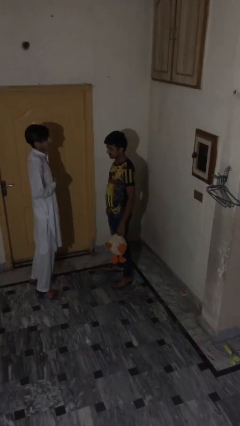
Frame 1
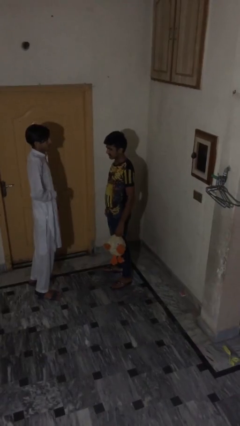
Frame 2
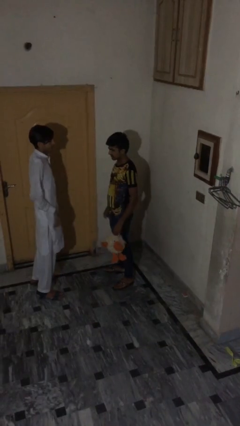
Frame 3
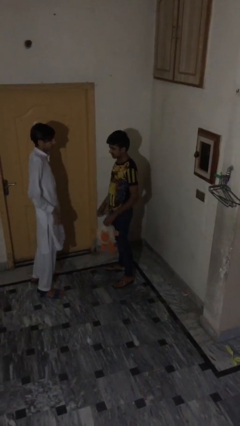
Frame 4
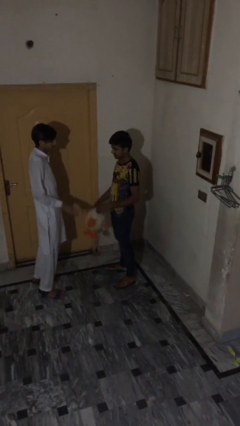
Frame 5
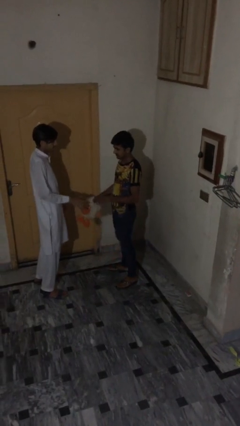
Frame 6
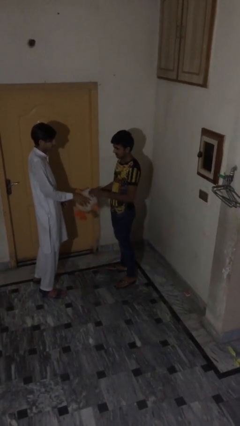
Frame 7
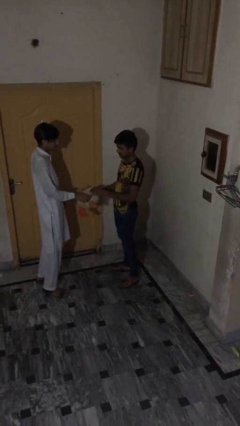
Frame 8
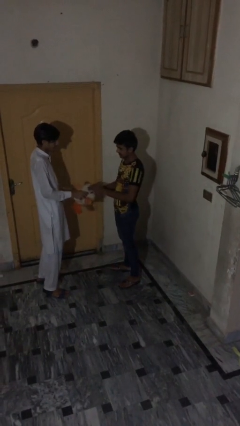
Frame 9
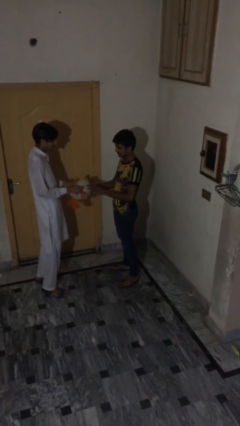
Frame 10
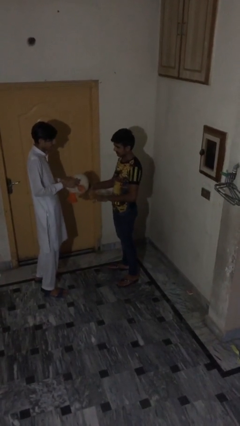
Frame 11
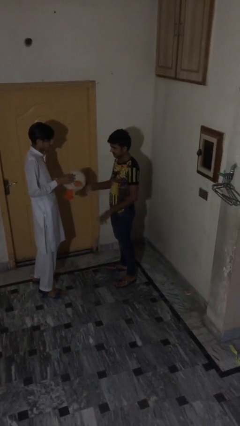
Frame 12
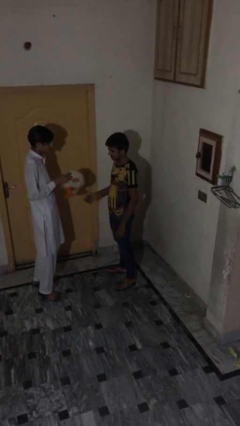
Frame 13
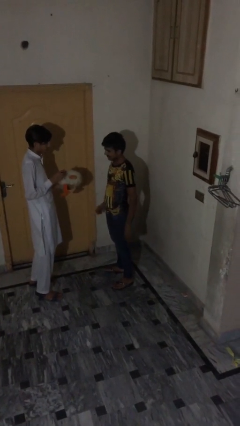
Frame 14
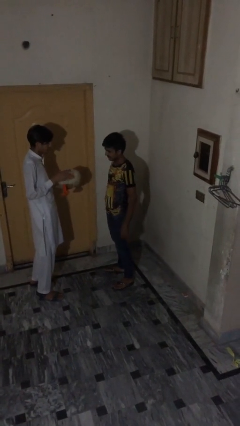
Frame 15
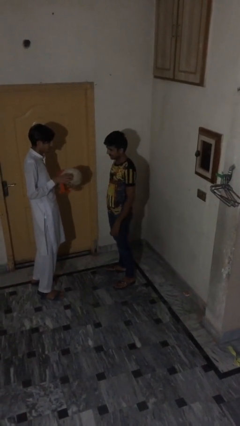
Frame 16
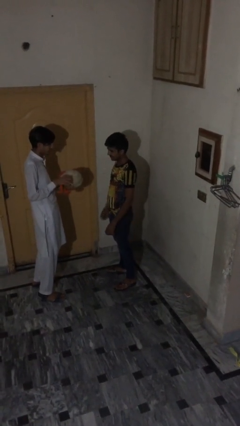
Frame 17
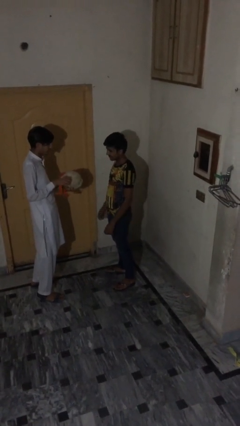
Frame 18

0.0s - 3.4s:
person transfers object to person

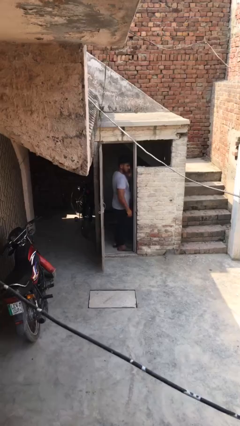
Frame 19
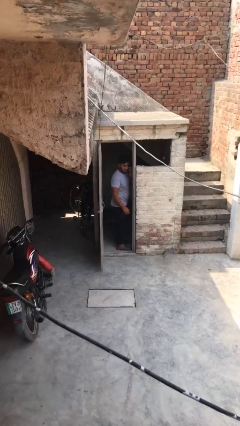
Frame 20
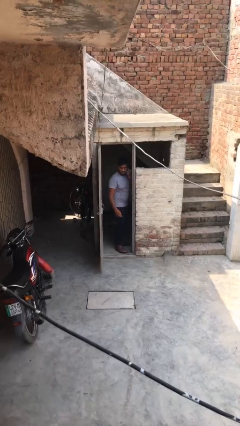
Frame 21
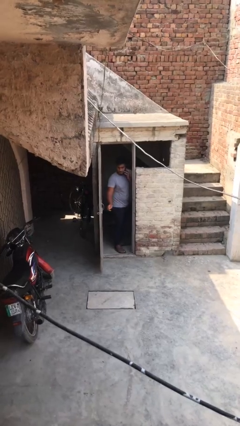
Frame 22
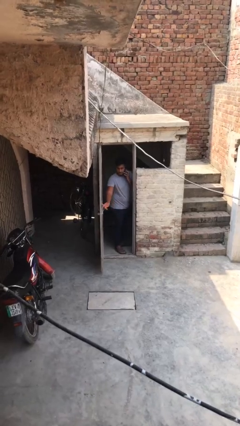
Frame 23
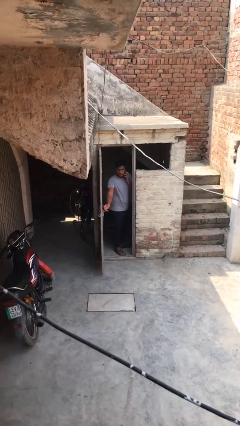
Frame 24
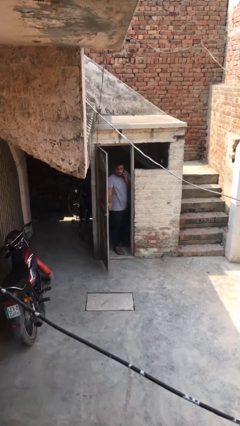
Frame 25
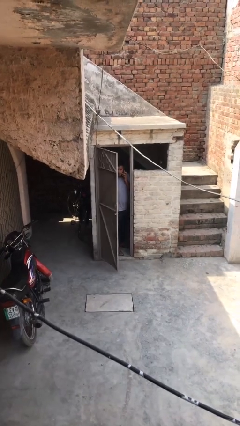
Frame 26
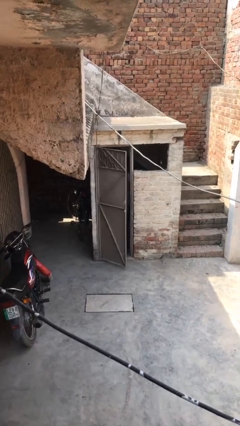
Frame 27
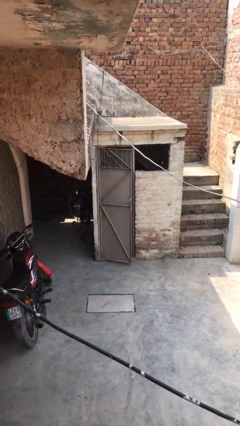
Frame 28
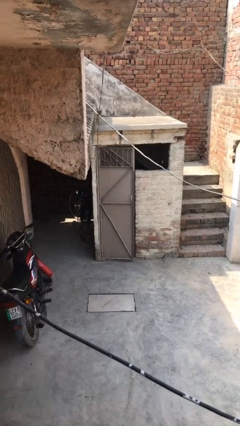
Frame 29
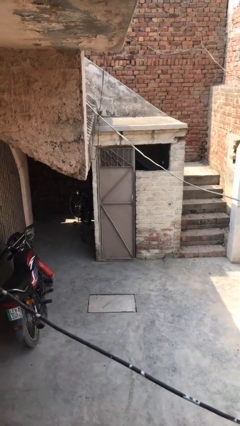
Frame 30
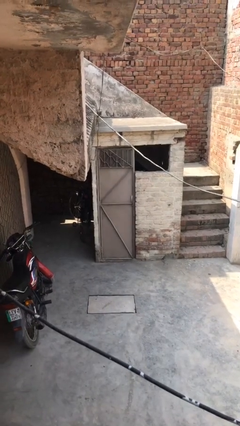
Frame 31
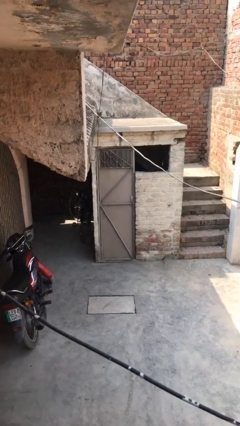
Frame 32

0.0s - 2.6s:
person closes facility door

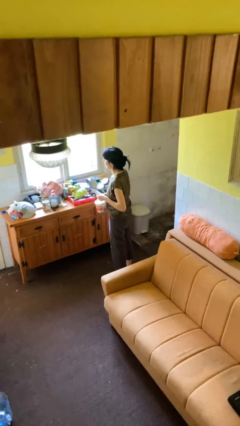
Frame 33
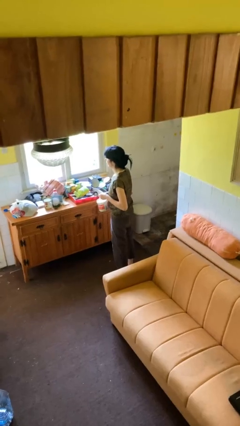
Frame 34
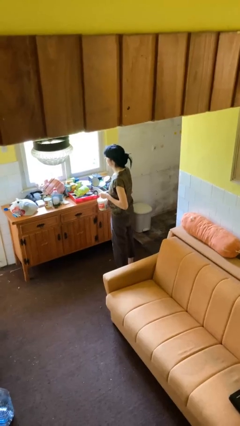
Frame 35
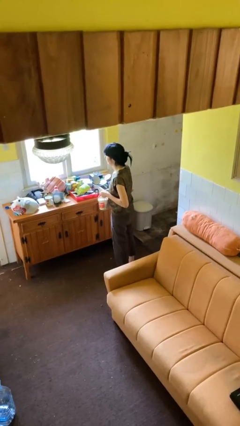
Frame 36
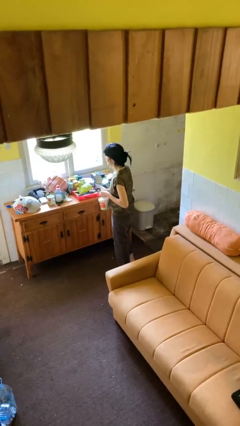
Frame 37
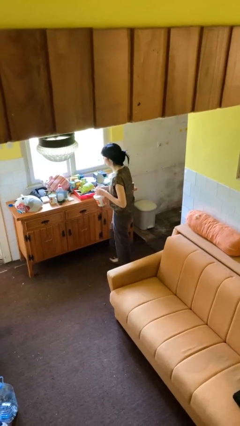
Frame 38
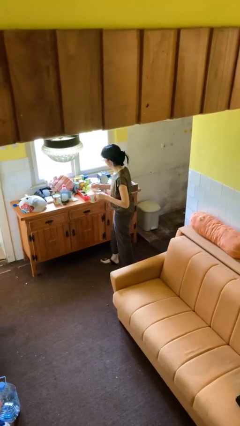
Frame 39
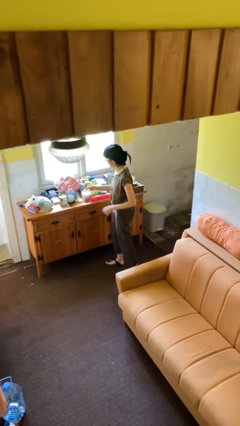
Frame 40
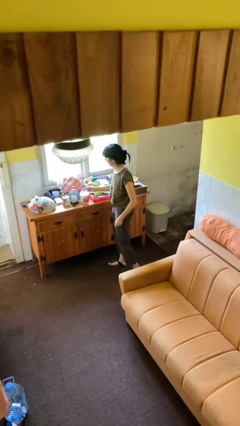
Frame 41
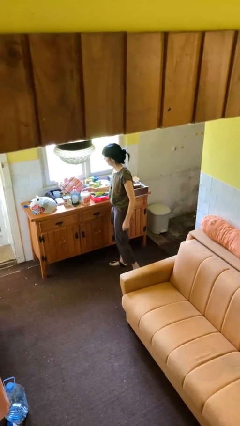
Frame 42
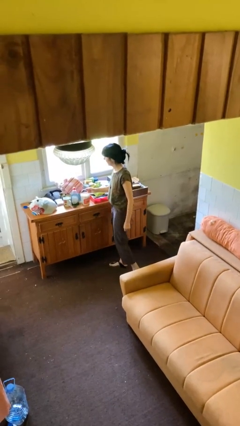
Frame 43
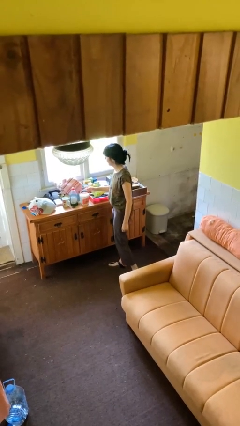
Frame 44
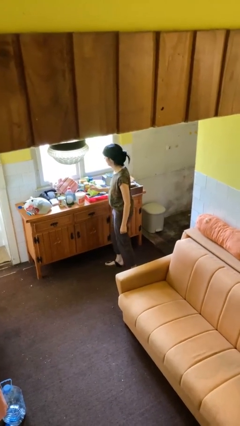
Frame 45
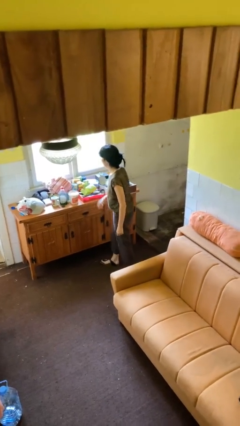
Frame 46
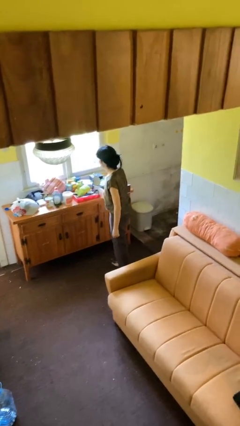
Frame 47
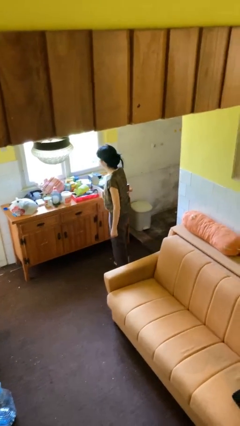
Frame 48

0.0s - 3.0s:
person puts down object on countertop

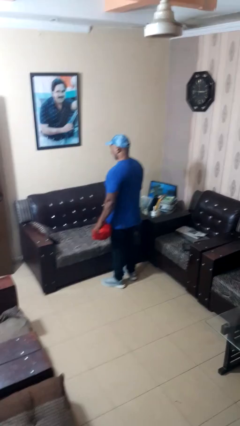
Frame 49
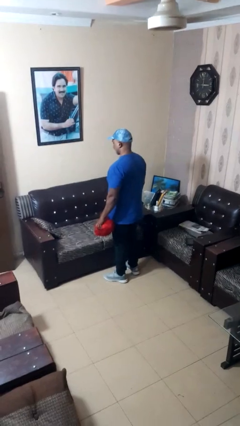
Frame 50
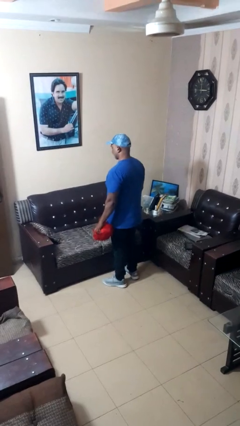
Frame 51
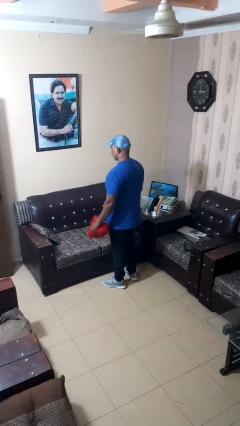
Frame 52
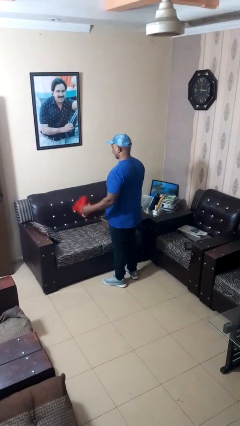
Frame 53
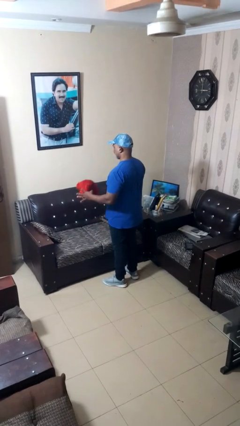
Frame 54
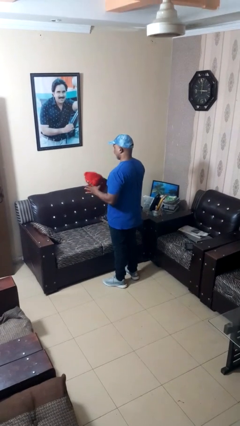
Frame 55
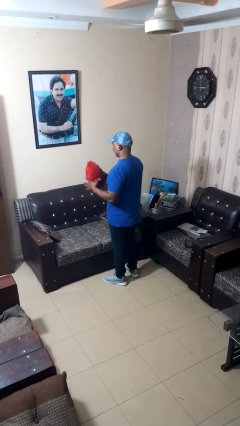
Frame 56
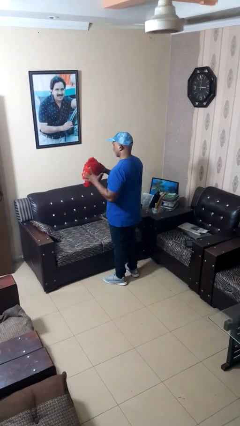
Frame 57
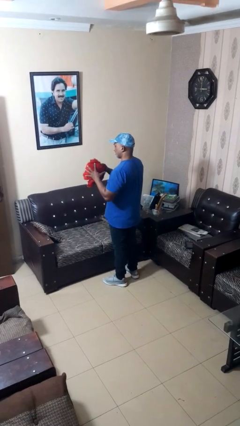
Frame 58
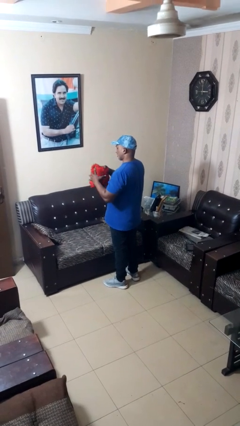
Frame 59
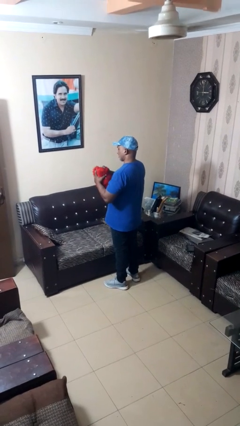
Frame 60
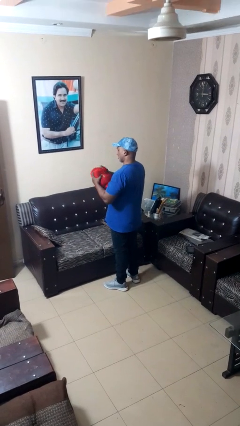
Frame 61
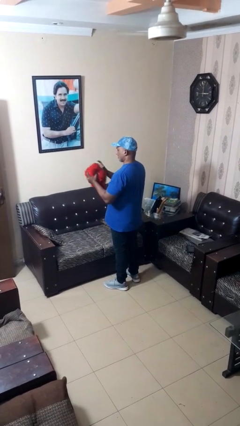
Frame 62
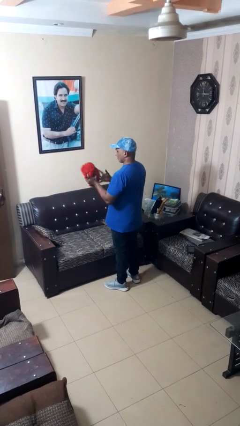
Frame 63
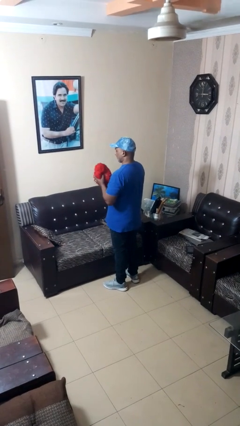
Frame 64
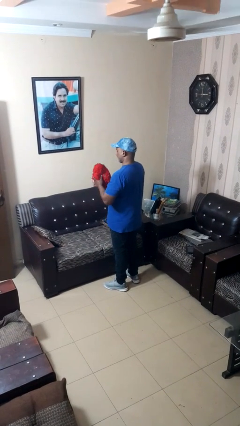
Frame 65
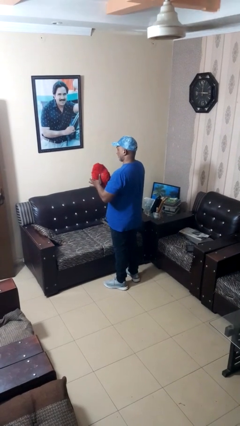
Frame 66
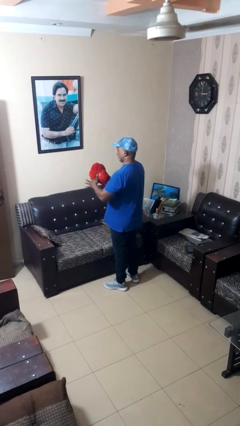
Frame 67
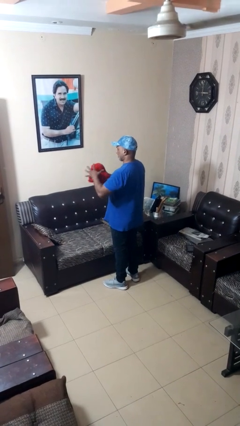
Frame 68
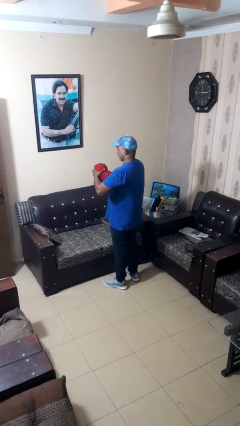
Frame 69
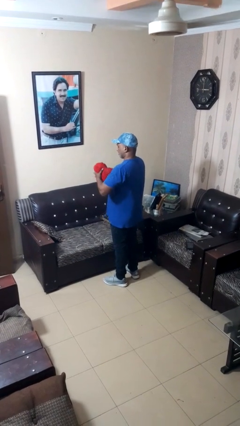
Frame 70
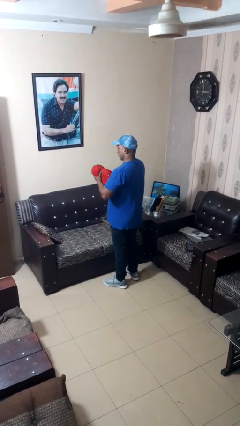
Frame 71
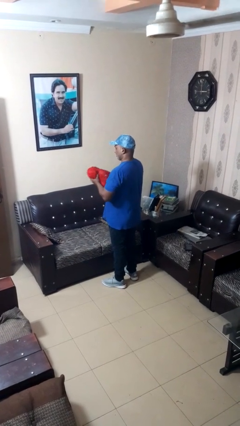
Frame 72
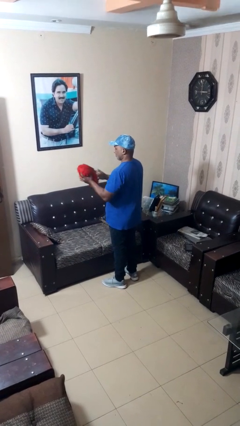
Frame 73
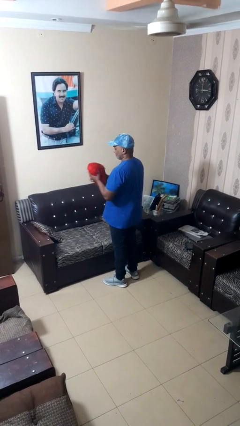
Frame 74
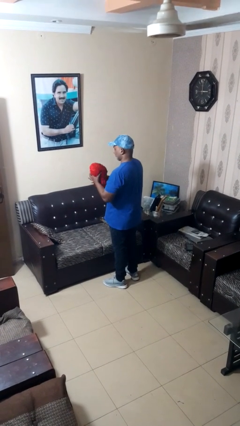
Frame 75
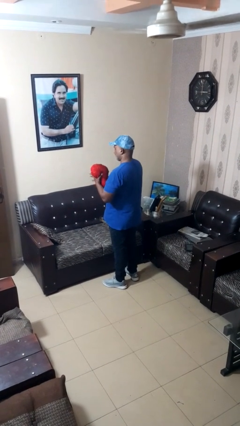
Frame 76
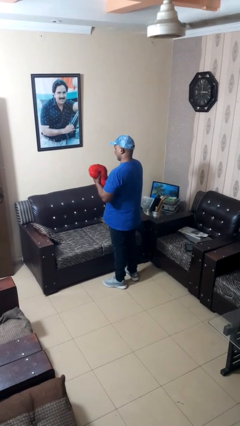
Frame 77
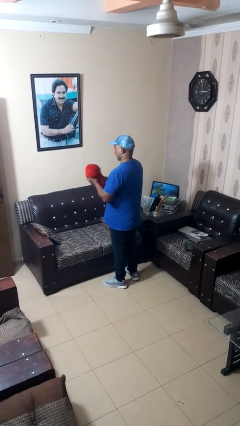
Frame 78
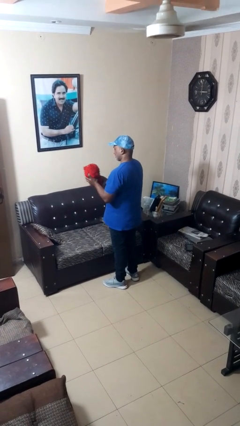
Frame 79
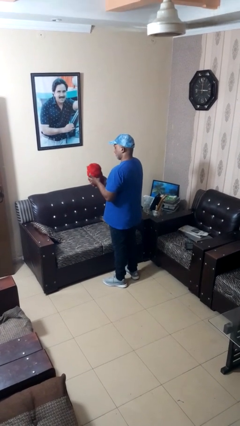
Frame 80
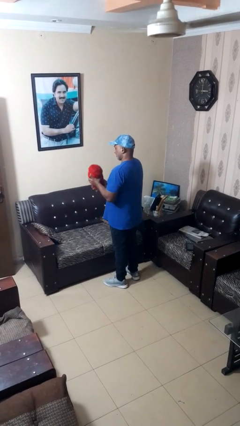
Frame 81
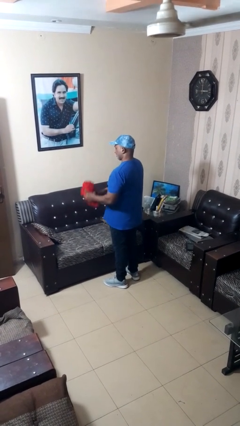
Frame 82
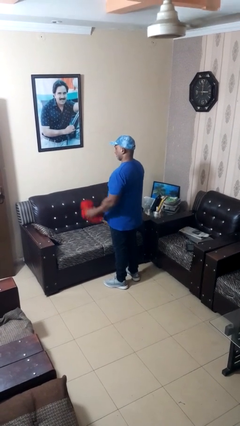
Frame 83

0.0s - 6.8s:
person squeezes object

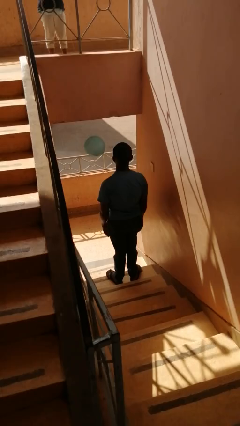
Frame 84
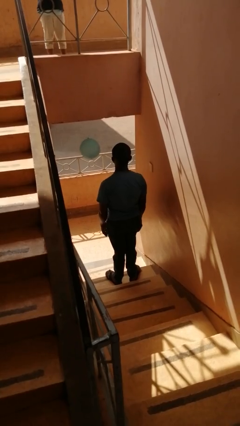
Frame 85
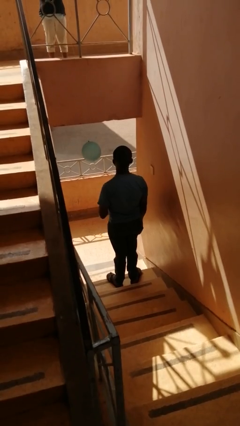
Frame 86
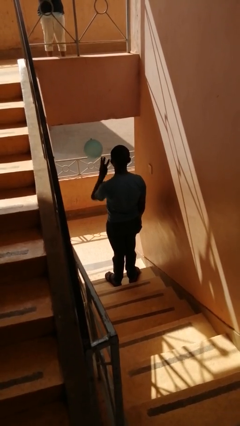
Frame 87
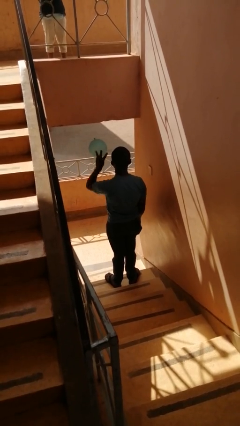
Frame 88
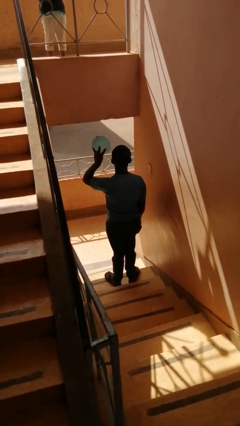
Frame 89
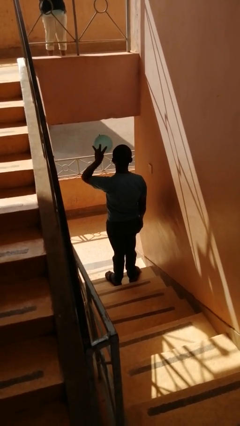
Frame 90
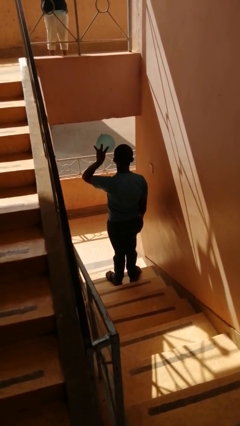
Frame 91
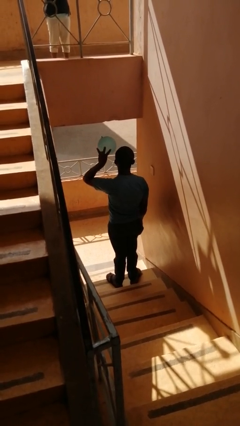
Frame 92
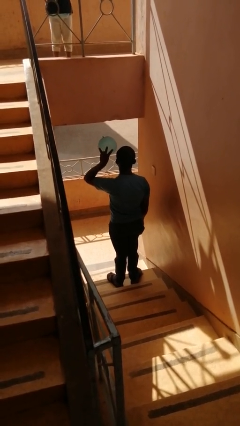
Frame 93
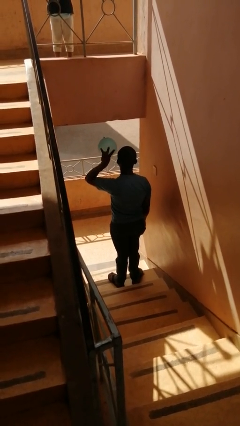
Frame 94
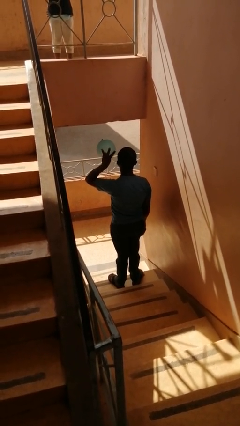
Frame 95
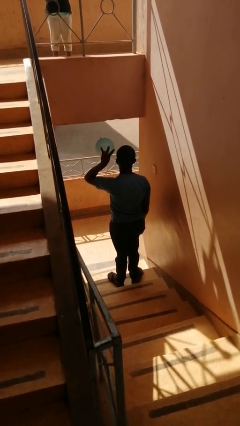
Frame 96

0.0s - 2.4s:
person gestures number three
